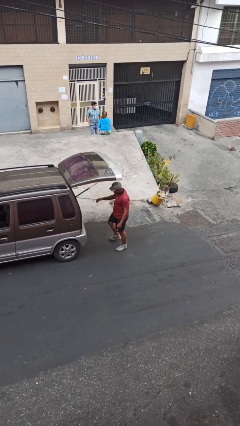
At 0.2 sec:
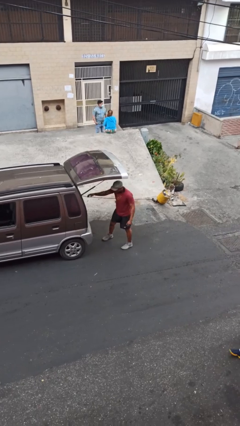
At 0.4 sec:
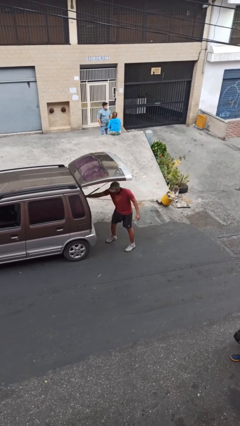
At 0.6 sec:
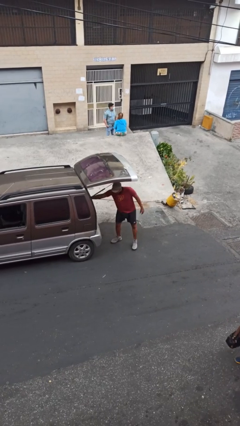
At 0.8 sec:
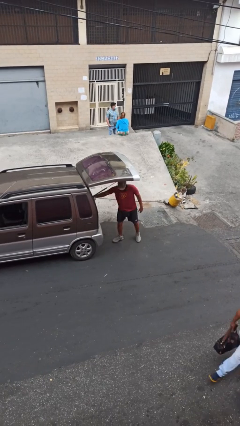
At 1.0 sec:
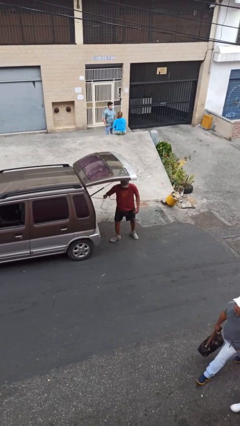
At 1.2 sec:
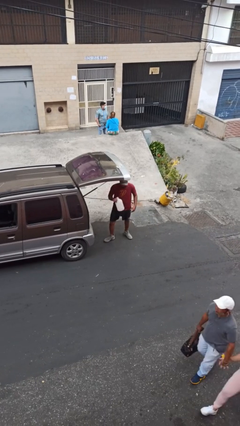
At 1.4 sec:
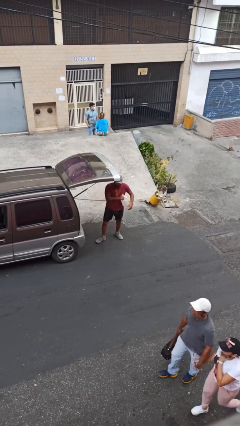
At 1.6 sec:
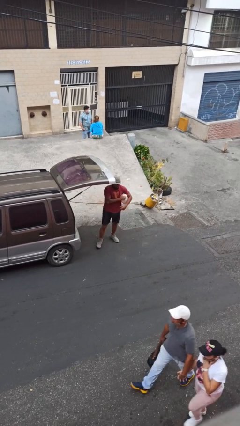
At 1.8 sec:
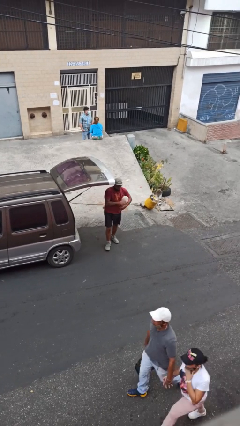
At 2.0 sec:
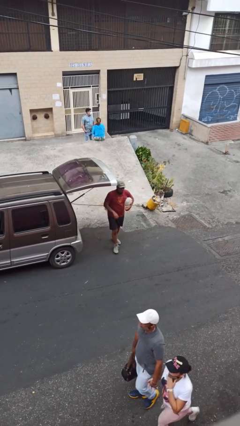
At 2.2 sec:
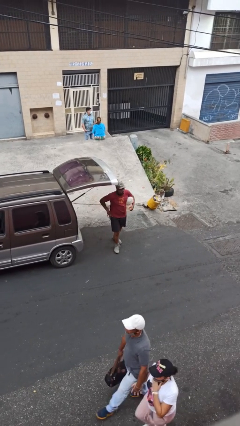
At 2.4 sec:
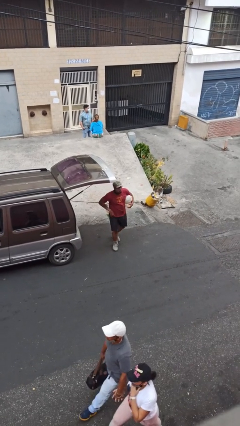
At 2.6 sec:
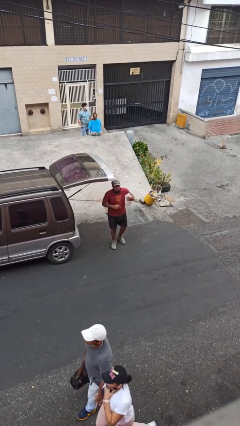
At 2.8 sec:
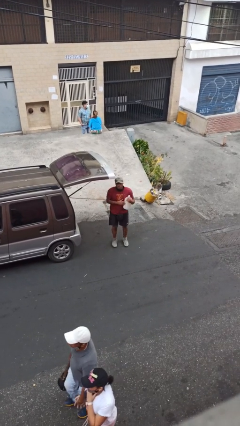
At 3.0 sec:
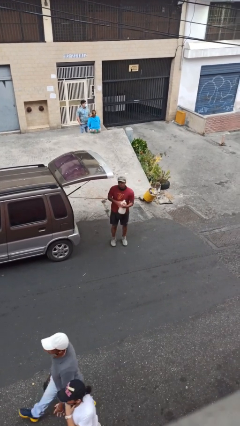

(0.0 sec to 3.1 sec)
person unloads car

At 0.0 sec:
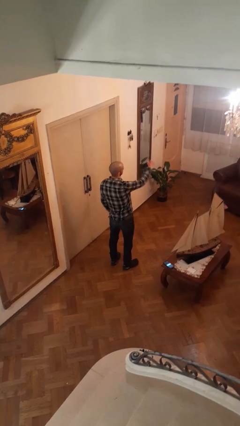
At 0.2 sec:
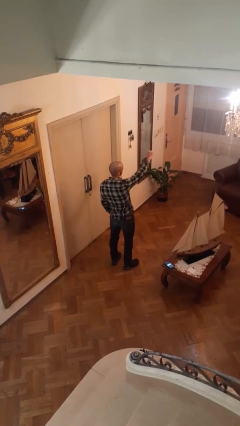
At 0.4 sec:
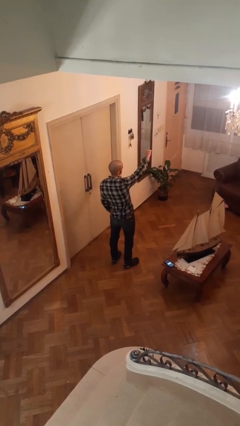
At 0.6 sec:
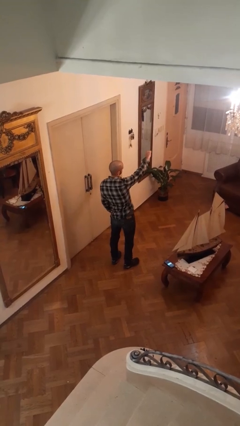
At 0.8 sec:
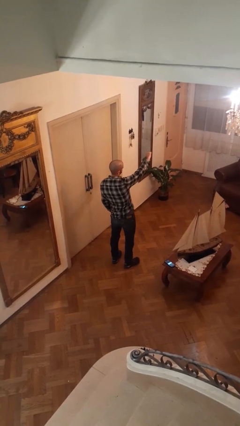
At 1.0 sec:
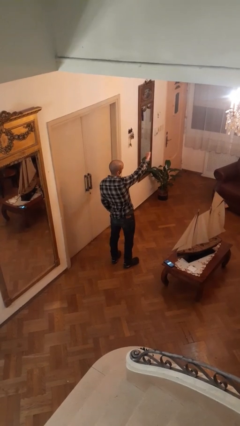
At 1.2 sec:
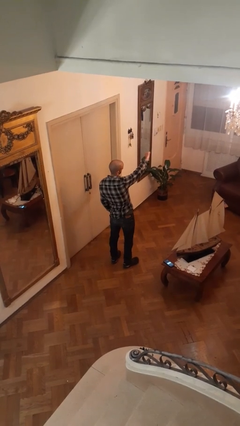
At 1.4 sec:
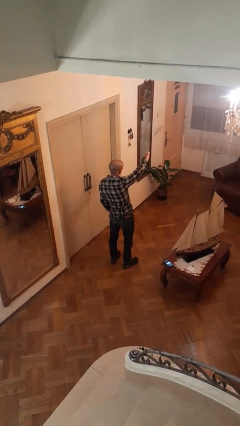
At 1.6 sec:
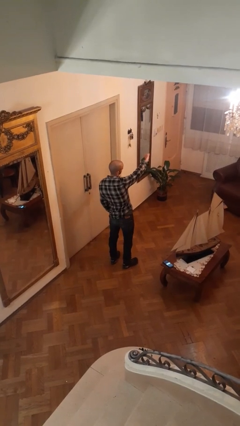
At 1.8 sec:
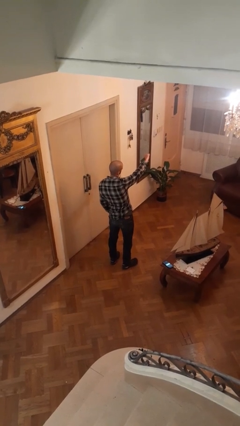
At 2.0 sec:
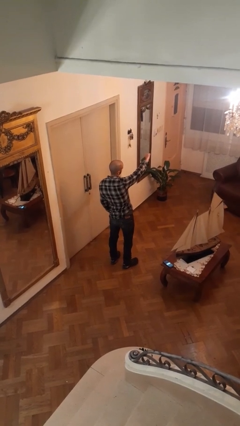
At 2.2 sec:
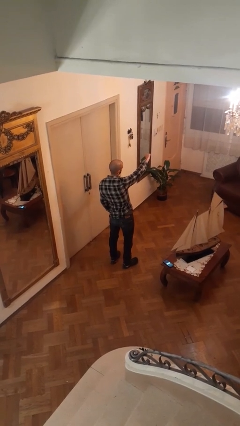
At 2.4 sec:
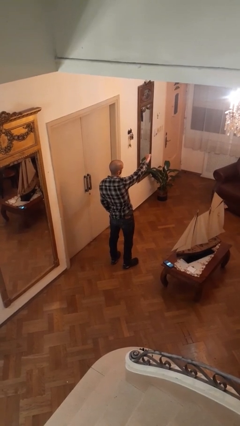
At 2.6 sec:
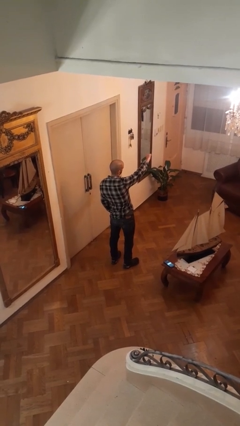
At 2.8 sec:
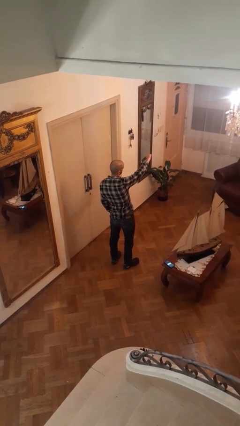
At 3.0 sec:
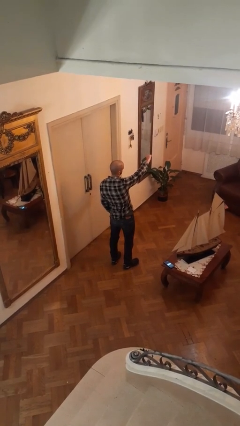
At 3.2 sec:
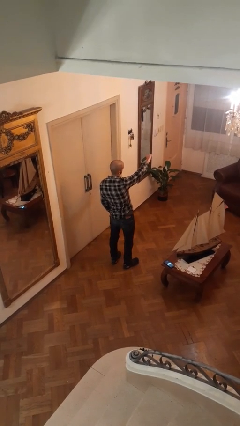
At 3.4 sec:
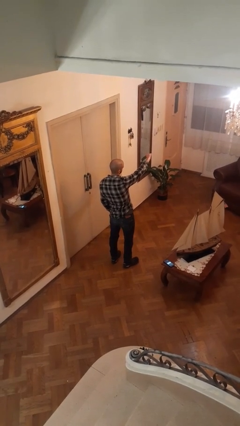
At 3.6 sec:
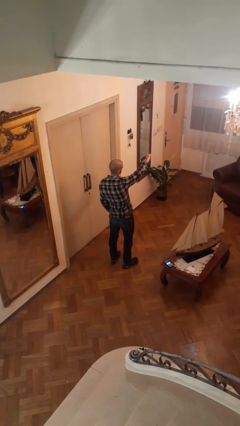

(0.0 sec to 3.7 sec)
person gestures thumbs down

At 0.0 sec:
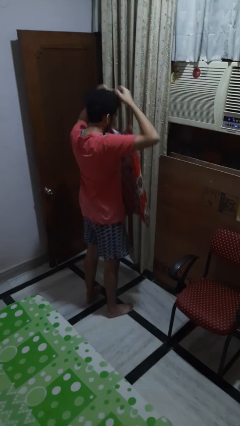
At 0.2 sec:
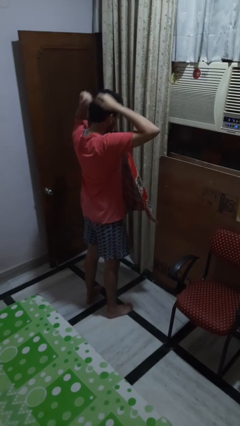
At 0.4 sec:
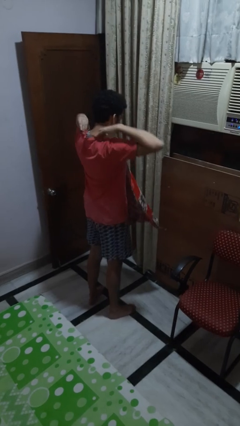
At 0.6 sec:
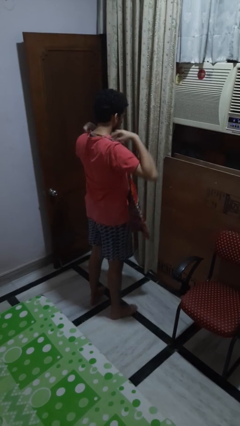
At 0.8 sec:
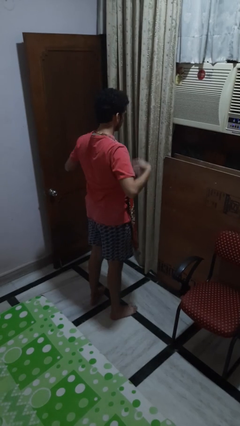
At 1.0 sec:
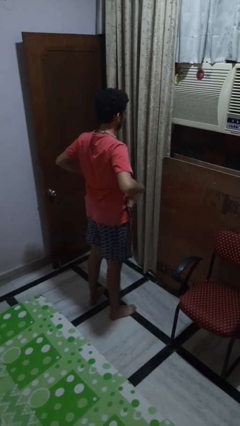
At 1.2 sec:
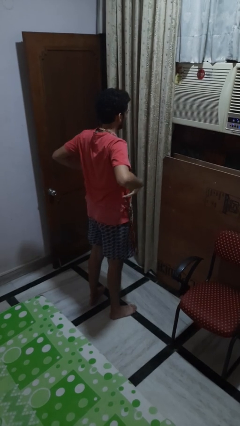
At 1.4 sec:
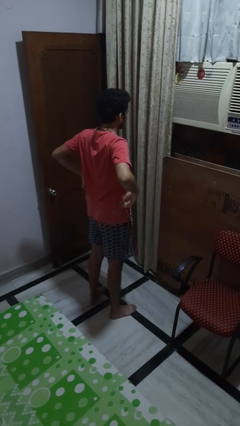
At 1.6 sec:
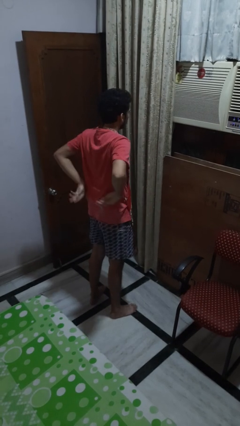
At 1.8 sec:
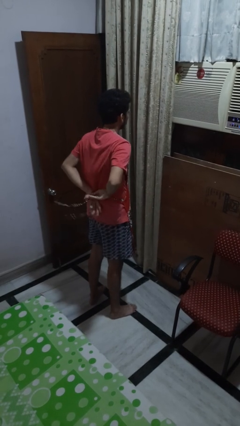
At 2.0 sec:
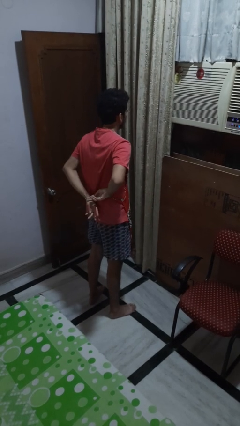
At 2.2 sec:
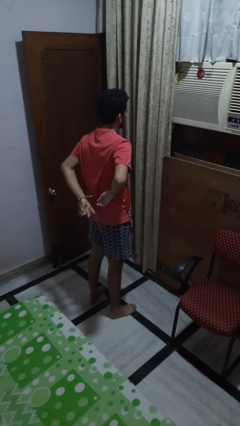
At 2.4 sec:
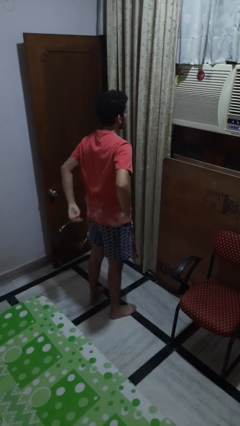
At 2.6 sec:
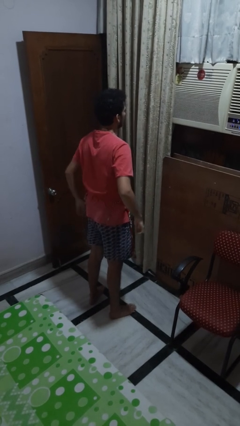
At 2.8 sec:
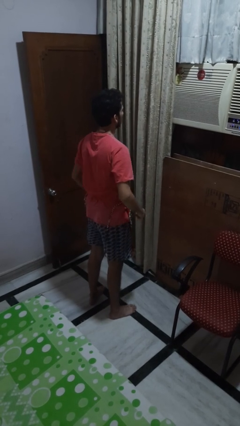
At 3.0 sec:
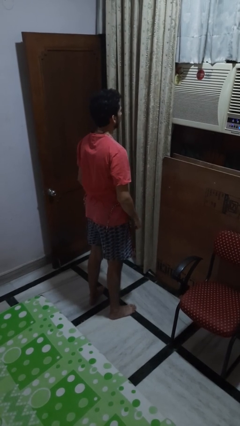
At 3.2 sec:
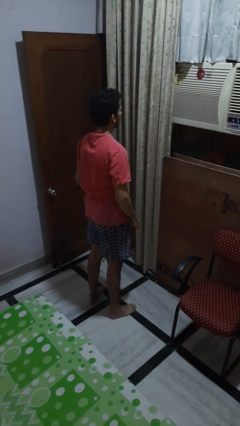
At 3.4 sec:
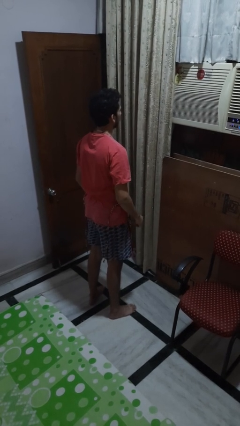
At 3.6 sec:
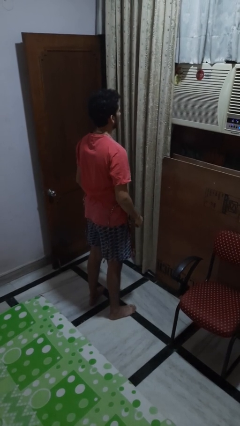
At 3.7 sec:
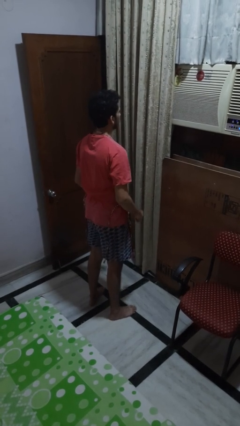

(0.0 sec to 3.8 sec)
person puts on apron

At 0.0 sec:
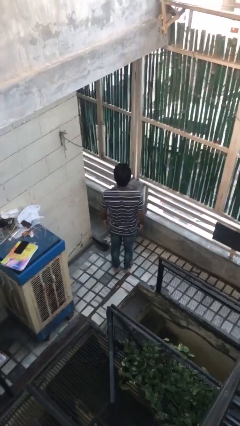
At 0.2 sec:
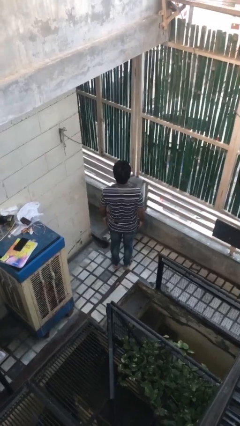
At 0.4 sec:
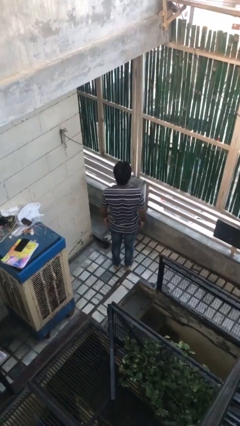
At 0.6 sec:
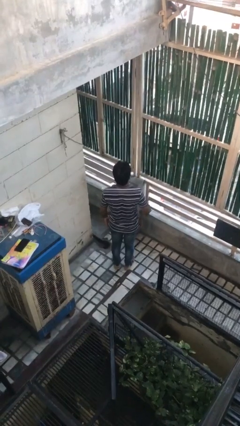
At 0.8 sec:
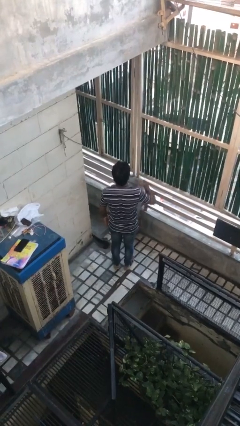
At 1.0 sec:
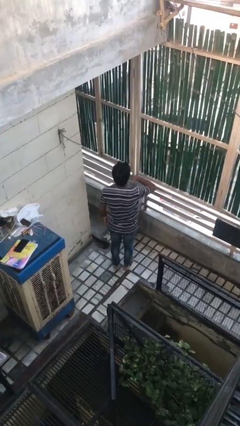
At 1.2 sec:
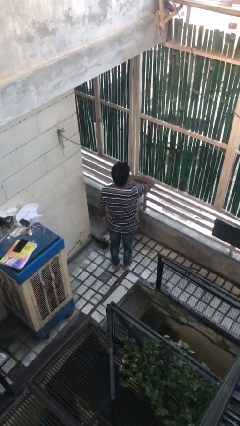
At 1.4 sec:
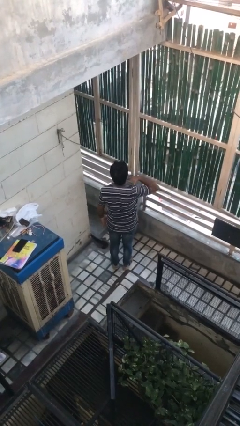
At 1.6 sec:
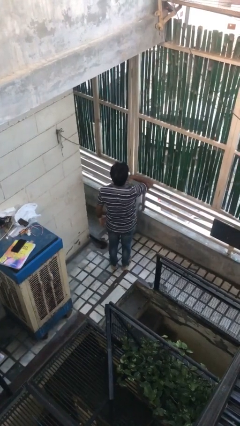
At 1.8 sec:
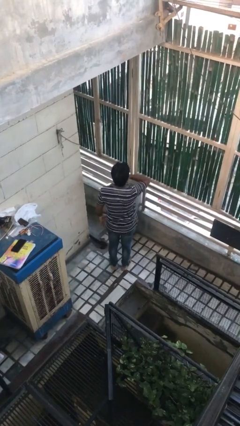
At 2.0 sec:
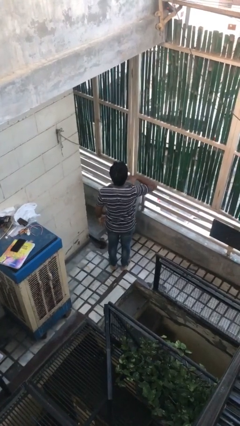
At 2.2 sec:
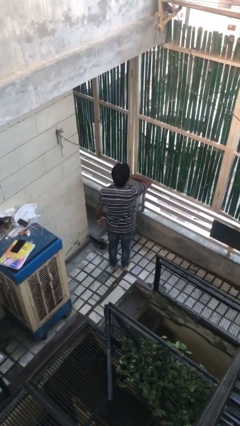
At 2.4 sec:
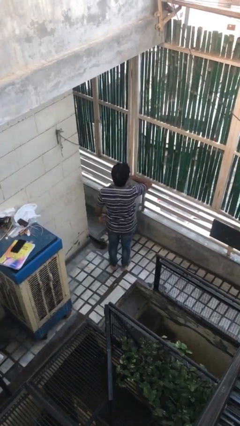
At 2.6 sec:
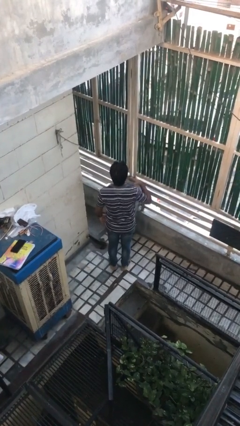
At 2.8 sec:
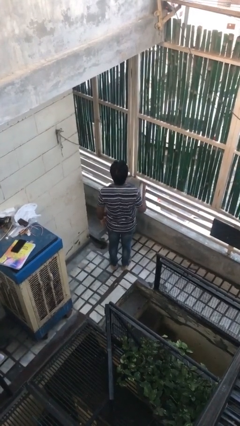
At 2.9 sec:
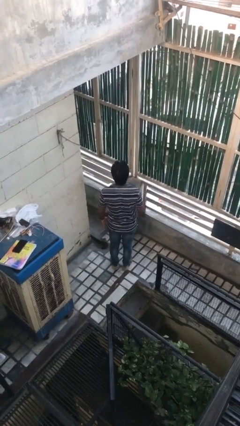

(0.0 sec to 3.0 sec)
person gestures cut

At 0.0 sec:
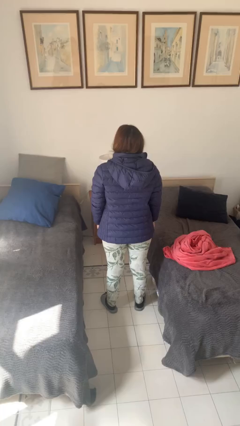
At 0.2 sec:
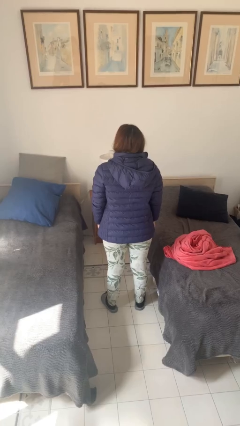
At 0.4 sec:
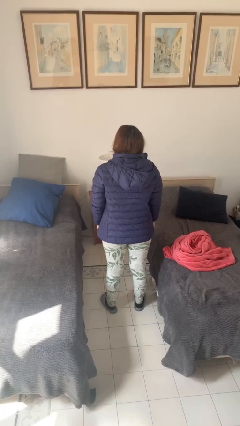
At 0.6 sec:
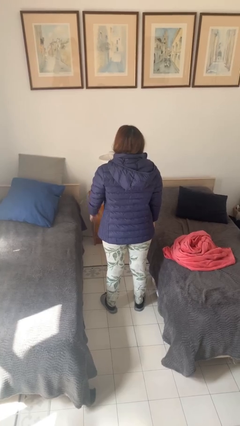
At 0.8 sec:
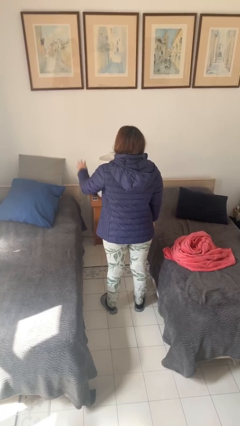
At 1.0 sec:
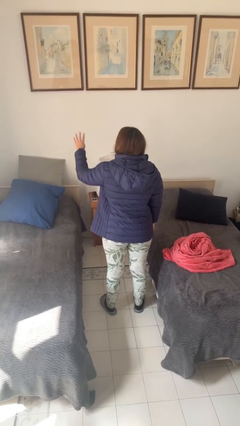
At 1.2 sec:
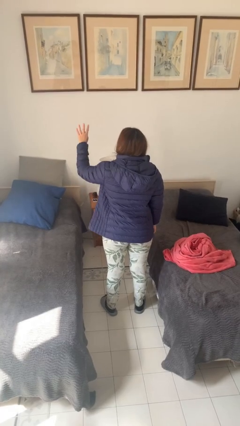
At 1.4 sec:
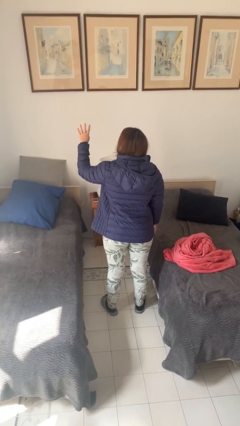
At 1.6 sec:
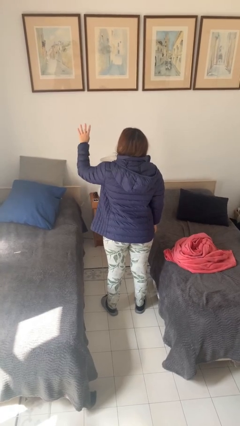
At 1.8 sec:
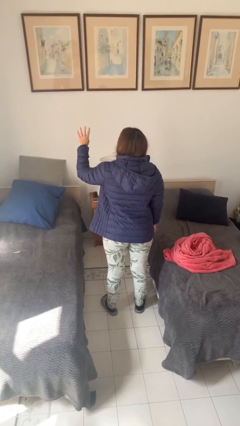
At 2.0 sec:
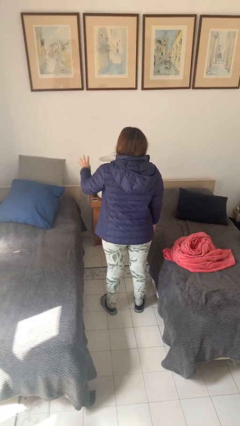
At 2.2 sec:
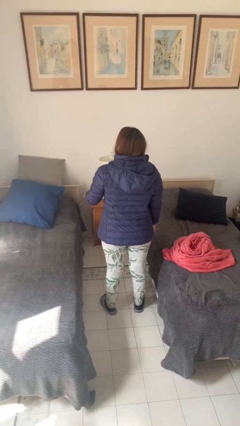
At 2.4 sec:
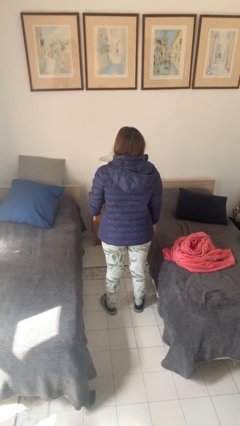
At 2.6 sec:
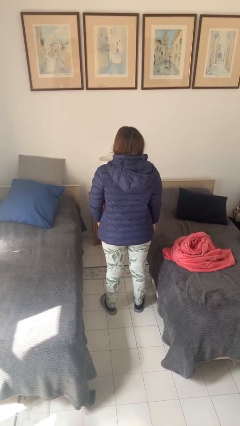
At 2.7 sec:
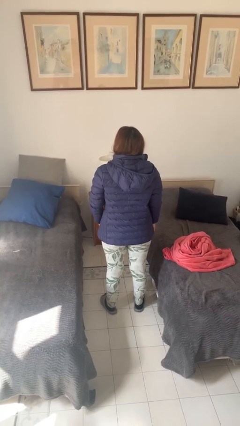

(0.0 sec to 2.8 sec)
person gestures number four

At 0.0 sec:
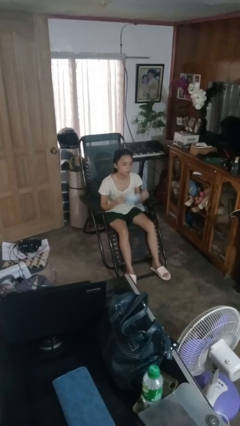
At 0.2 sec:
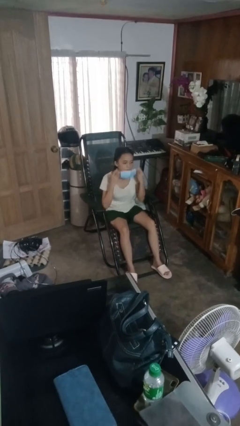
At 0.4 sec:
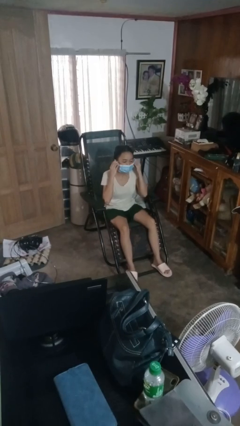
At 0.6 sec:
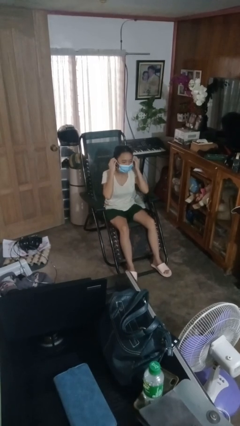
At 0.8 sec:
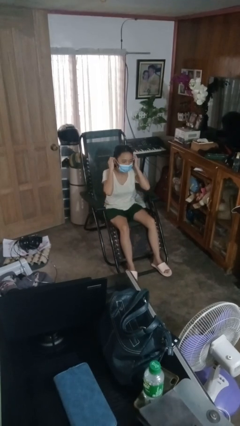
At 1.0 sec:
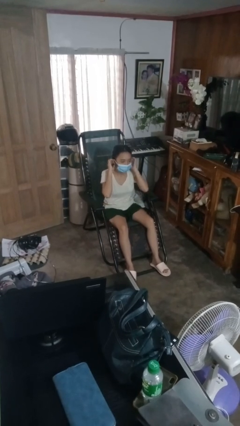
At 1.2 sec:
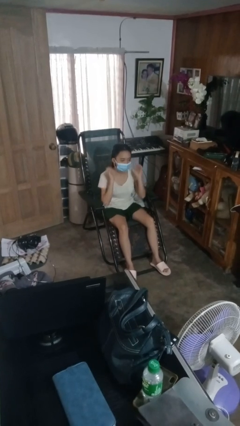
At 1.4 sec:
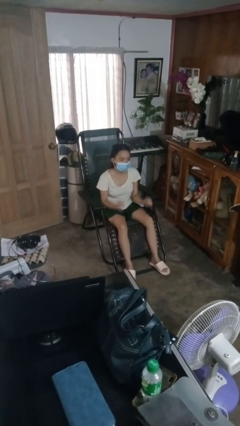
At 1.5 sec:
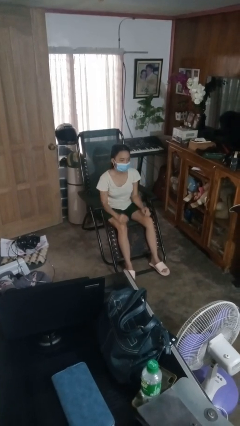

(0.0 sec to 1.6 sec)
person puts on facemask
